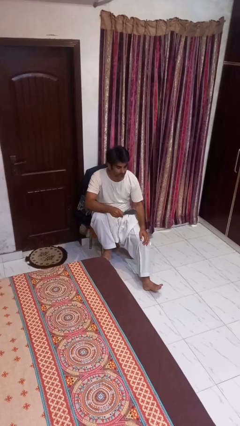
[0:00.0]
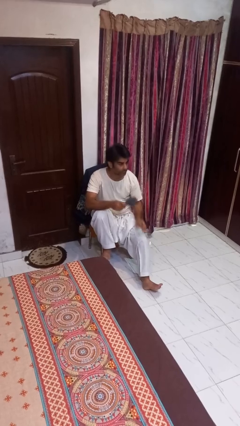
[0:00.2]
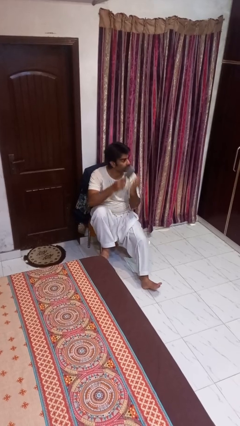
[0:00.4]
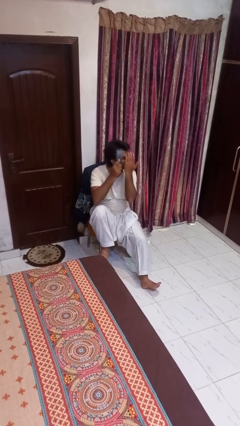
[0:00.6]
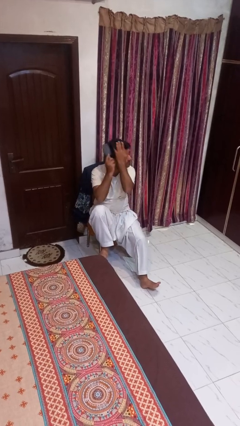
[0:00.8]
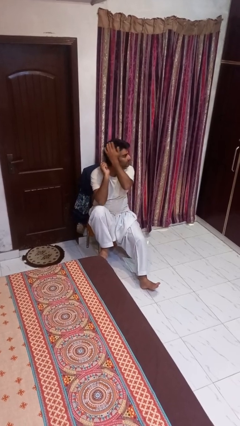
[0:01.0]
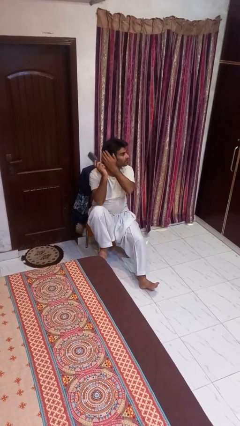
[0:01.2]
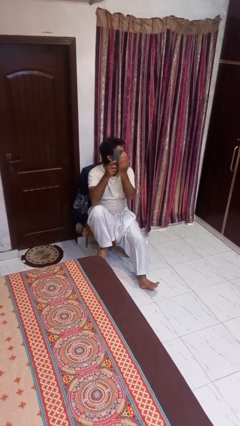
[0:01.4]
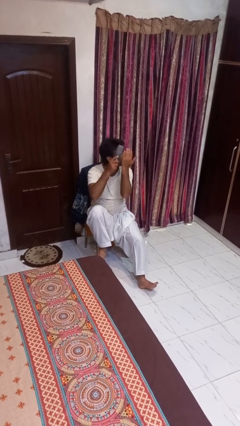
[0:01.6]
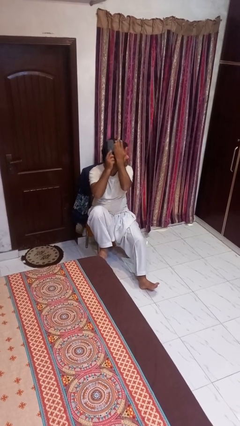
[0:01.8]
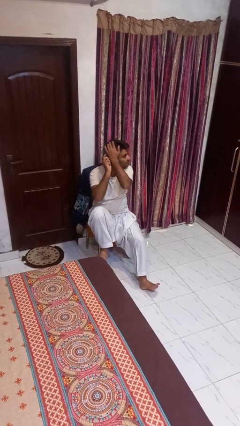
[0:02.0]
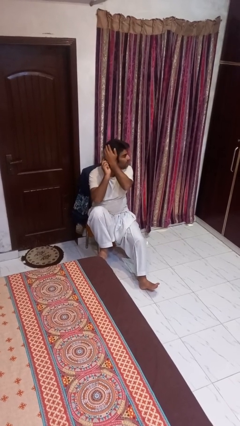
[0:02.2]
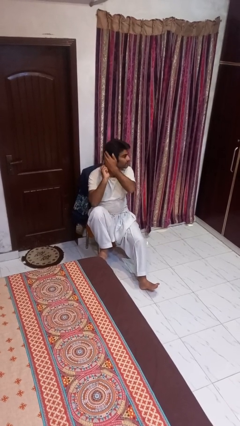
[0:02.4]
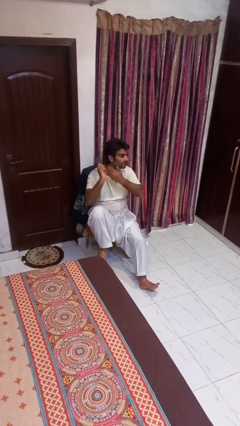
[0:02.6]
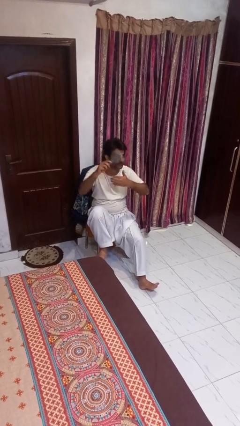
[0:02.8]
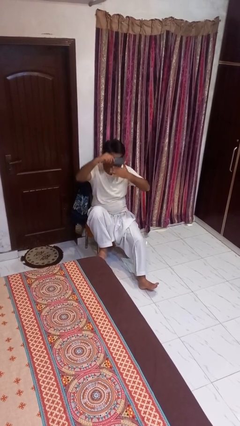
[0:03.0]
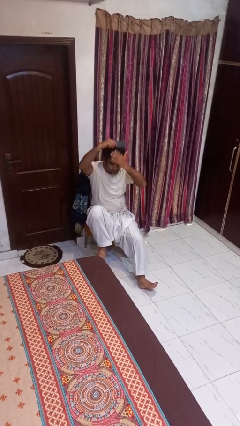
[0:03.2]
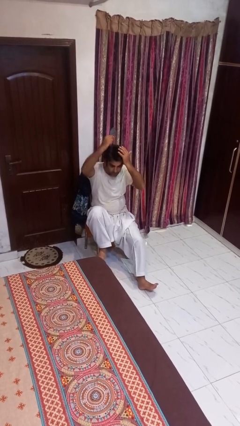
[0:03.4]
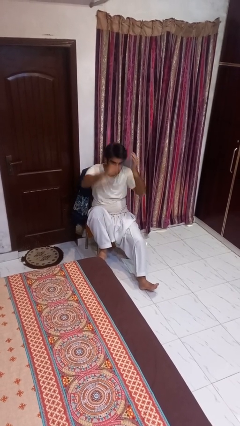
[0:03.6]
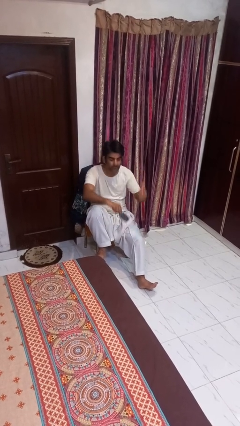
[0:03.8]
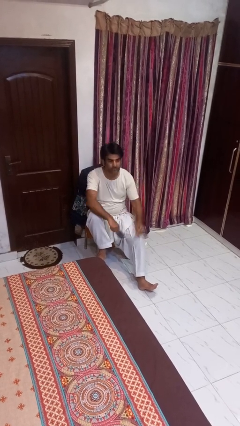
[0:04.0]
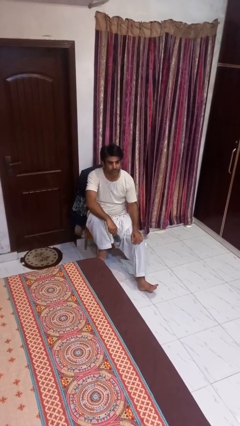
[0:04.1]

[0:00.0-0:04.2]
person brushes hair

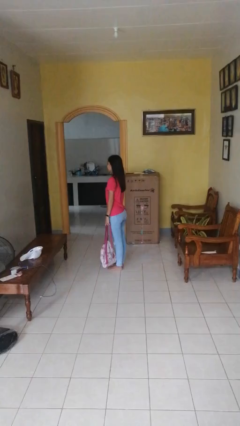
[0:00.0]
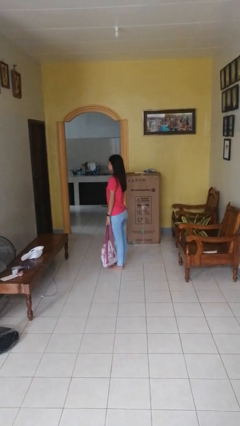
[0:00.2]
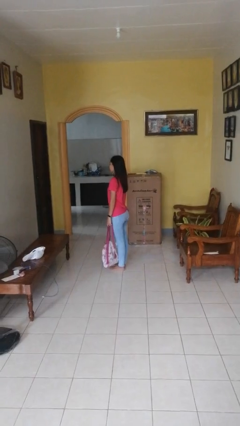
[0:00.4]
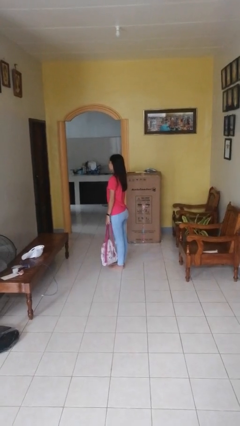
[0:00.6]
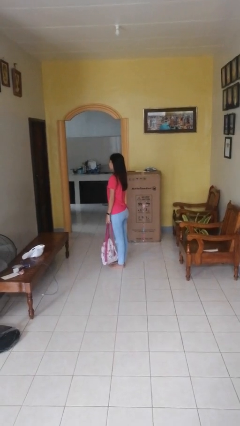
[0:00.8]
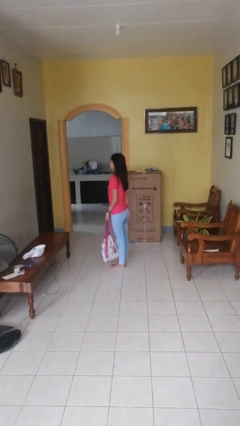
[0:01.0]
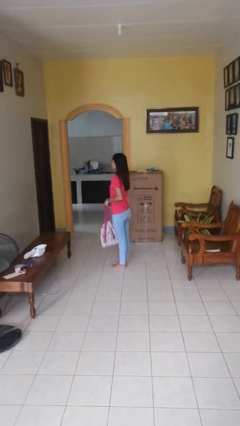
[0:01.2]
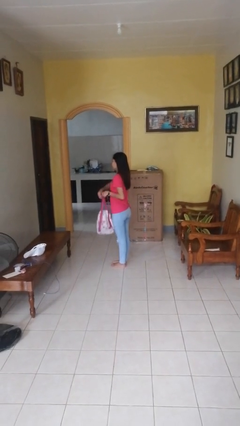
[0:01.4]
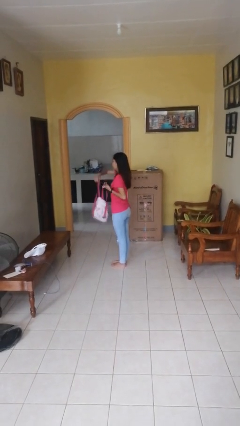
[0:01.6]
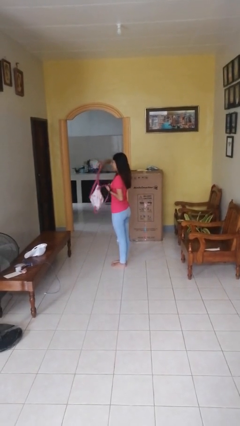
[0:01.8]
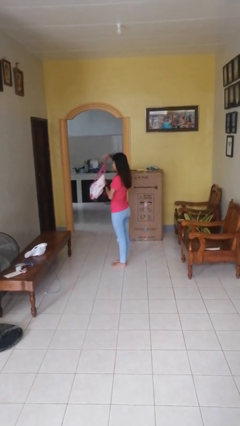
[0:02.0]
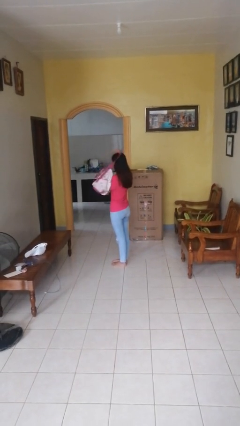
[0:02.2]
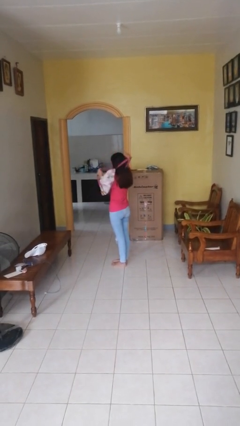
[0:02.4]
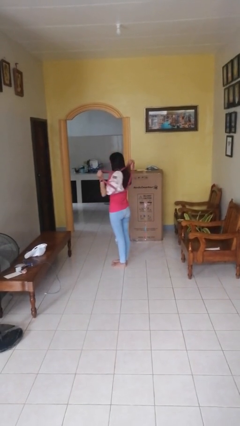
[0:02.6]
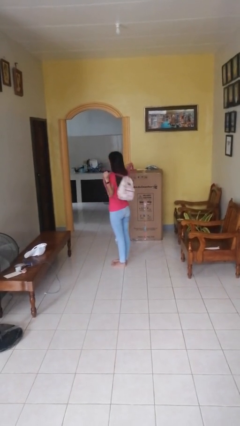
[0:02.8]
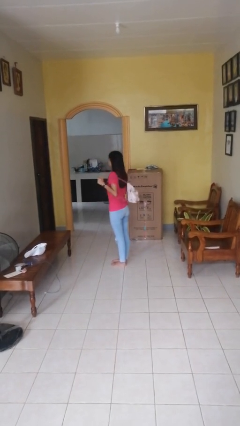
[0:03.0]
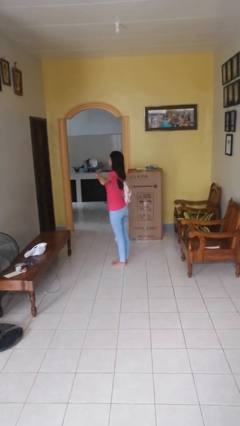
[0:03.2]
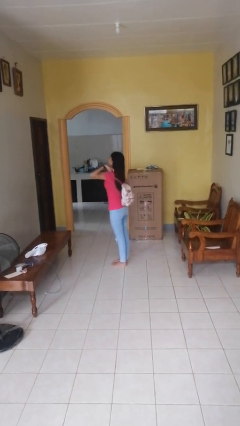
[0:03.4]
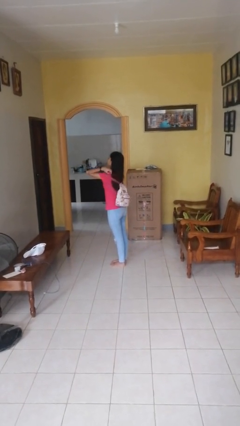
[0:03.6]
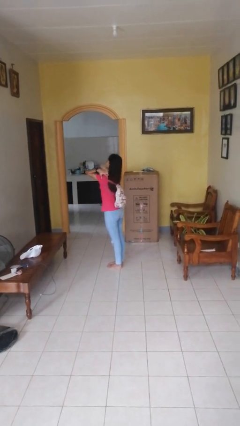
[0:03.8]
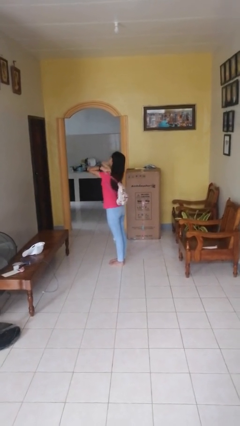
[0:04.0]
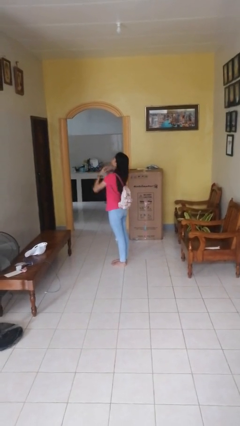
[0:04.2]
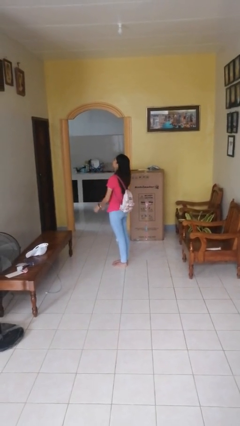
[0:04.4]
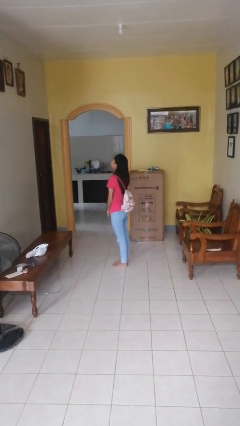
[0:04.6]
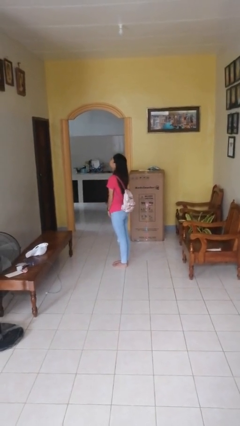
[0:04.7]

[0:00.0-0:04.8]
person puts on backpack

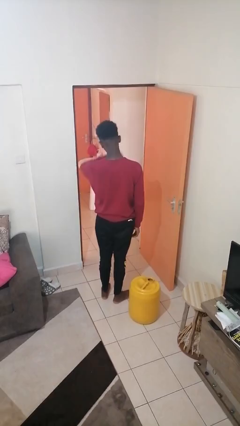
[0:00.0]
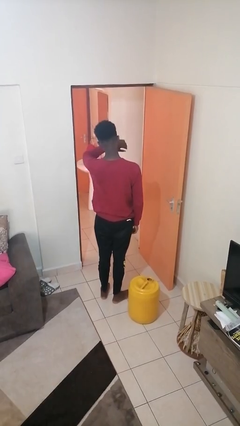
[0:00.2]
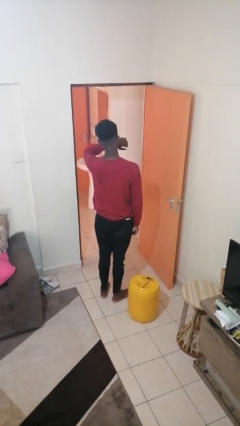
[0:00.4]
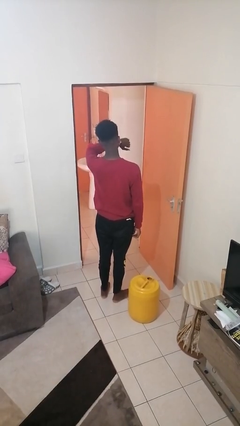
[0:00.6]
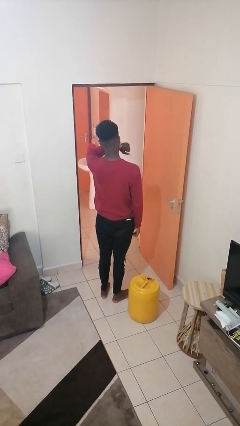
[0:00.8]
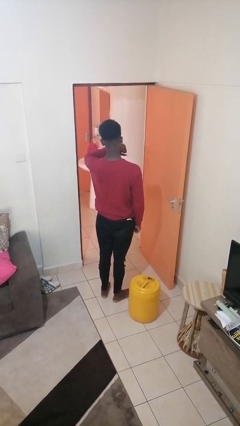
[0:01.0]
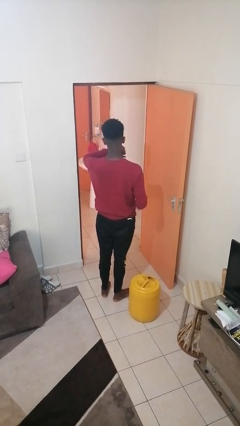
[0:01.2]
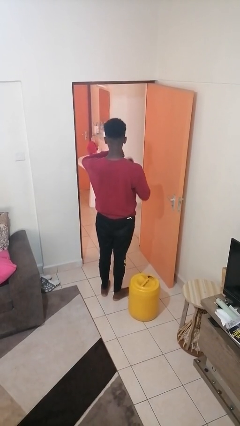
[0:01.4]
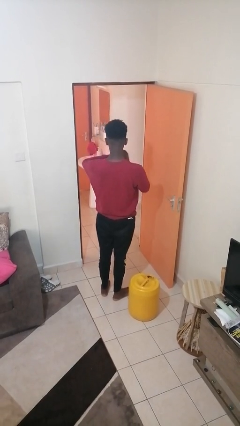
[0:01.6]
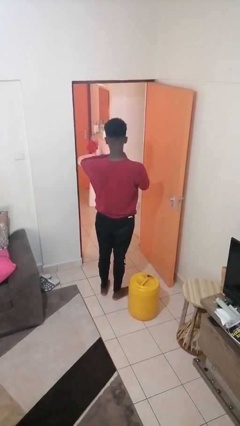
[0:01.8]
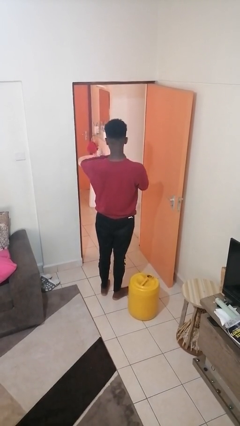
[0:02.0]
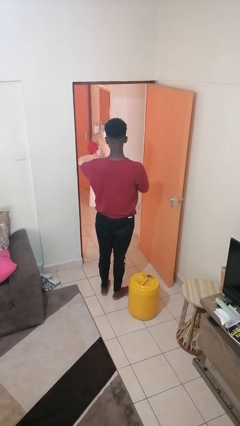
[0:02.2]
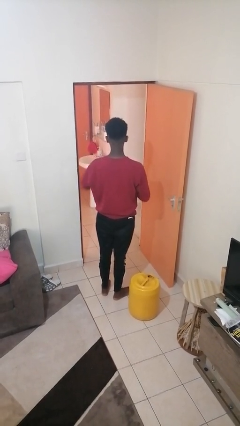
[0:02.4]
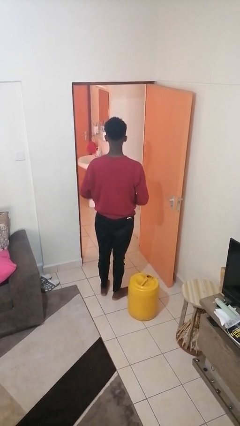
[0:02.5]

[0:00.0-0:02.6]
person looks at wristwatch

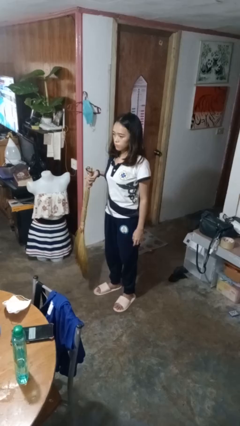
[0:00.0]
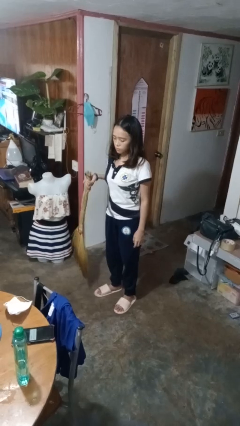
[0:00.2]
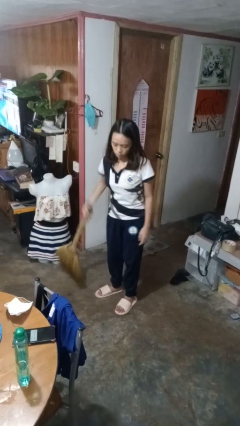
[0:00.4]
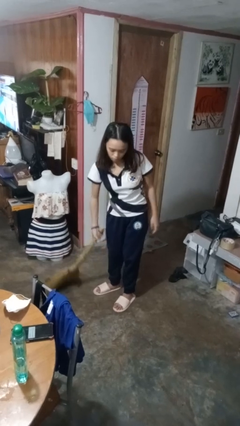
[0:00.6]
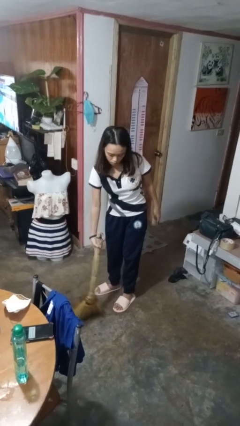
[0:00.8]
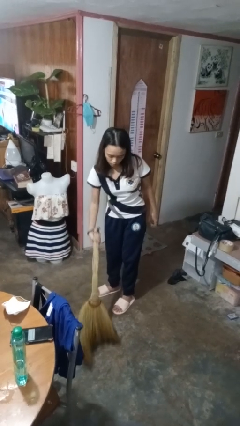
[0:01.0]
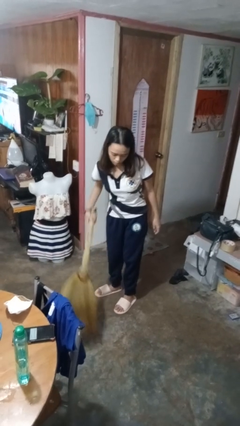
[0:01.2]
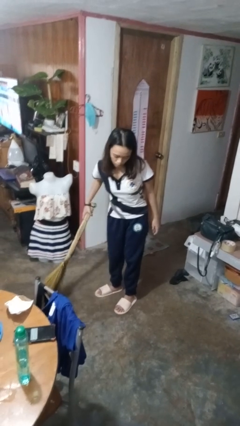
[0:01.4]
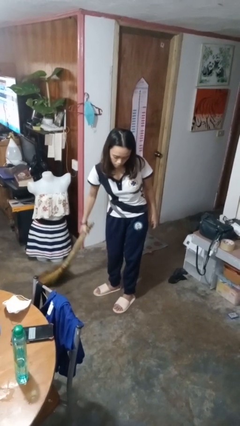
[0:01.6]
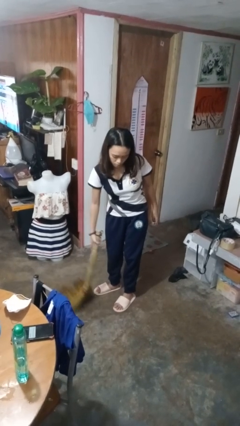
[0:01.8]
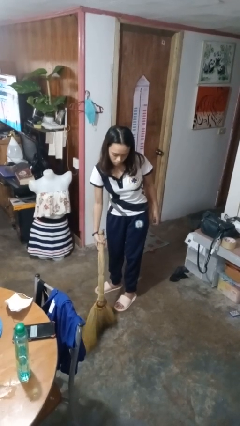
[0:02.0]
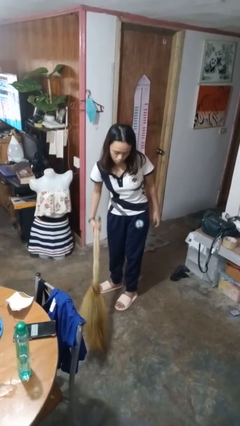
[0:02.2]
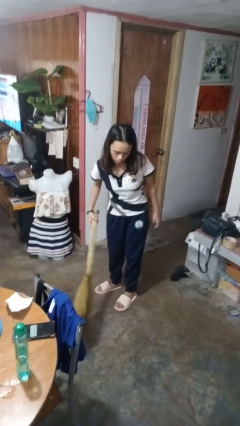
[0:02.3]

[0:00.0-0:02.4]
person sweeps floor

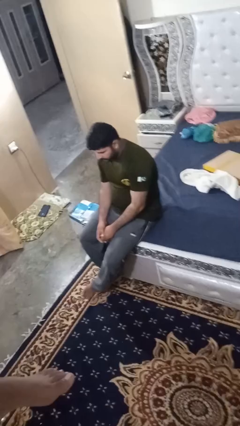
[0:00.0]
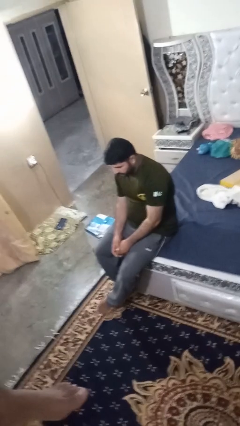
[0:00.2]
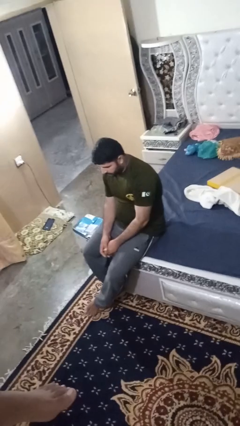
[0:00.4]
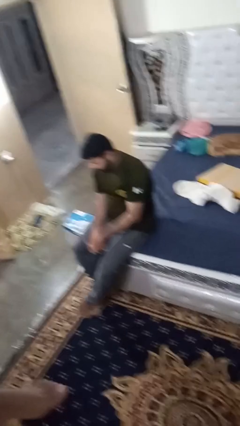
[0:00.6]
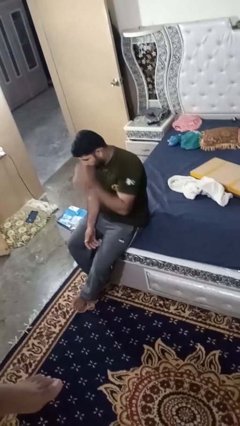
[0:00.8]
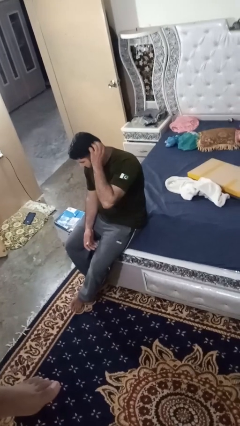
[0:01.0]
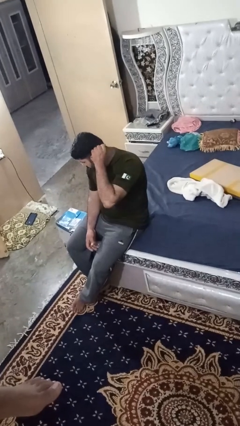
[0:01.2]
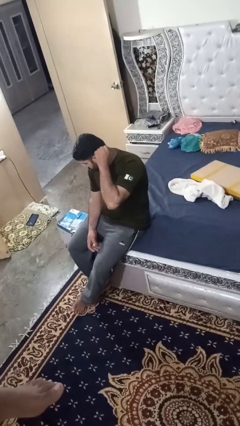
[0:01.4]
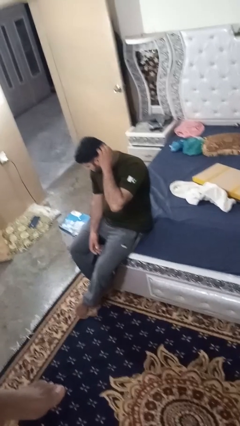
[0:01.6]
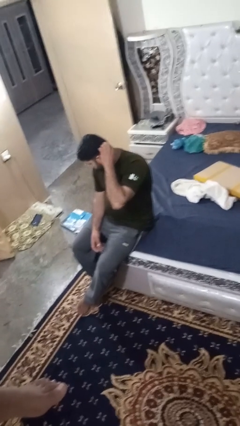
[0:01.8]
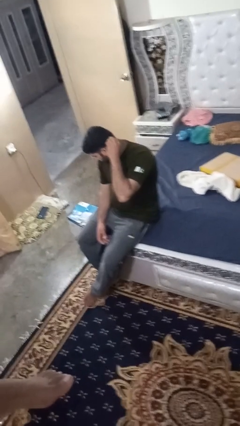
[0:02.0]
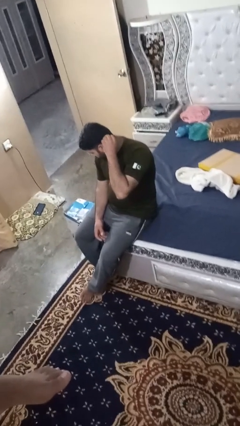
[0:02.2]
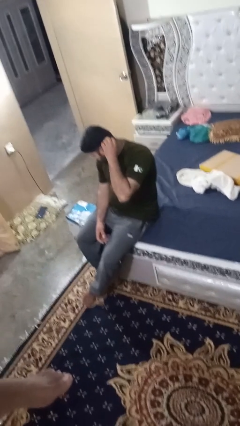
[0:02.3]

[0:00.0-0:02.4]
person strokes hair

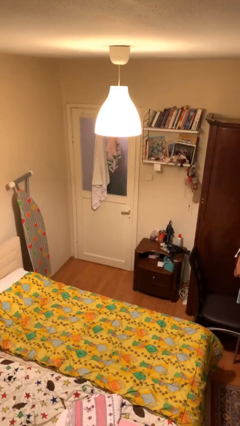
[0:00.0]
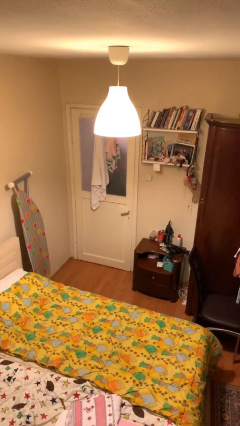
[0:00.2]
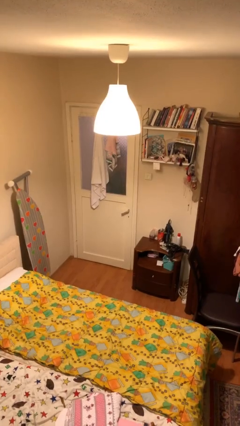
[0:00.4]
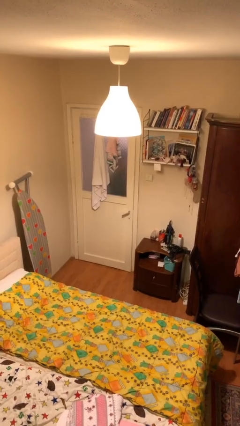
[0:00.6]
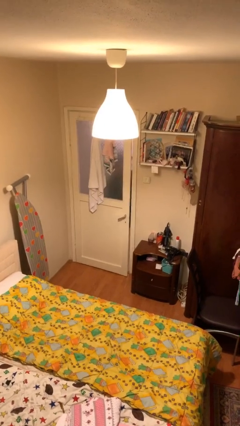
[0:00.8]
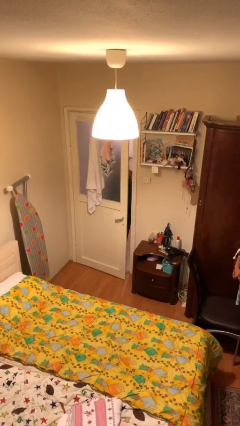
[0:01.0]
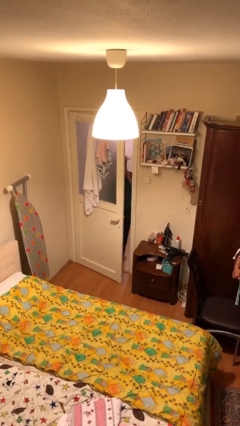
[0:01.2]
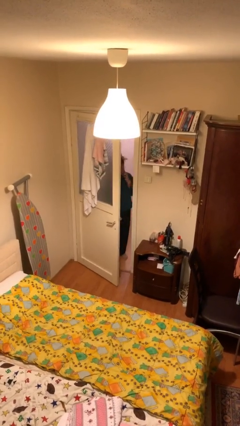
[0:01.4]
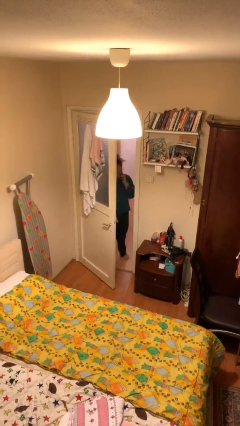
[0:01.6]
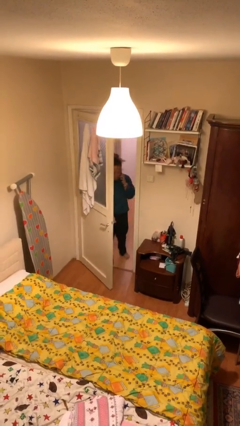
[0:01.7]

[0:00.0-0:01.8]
person opens facility door
